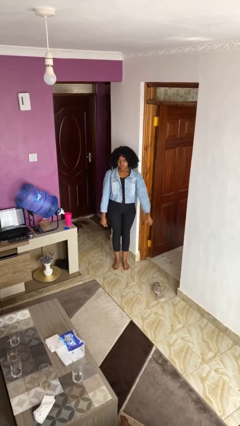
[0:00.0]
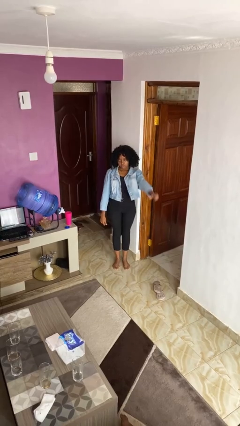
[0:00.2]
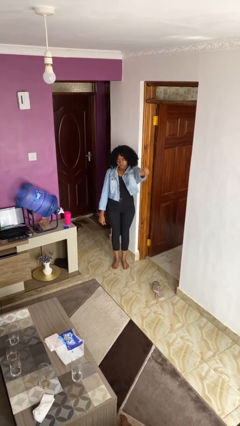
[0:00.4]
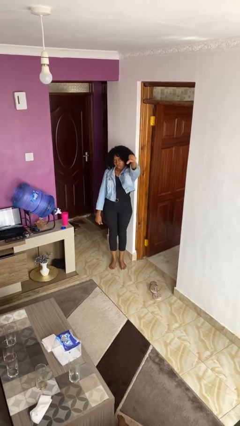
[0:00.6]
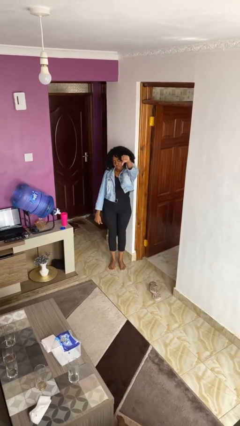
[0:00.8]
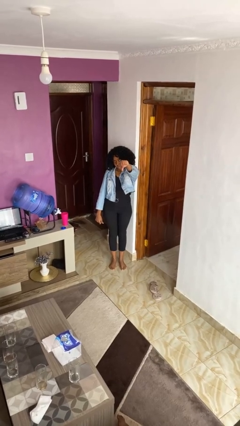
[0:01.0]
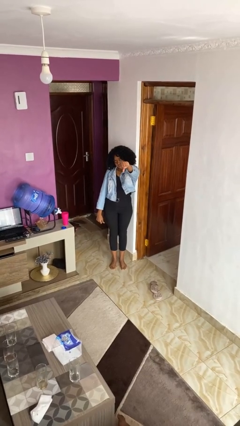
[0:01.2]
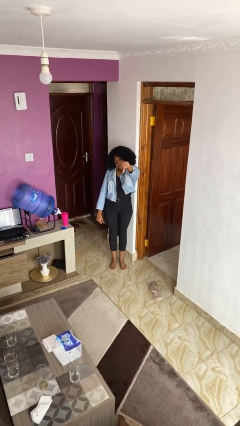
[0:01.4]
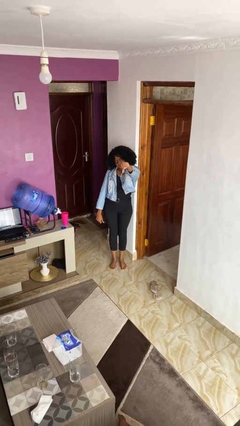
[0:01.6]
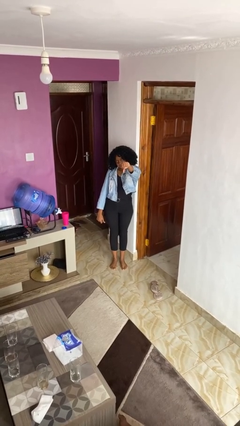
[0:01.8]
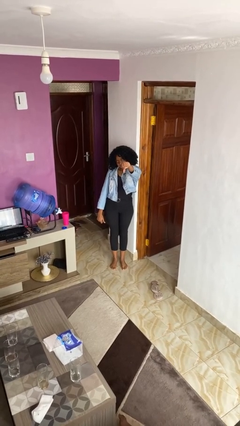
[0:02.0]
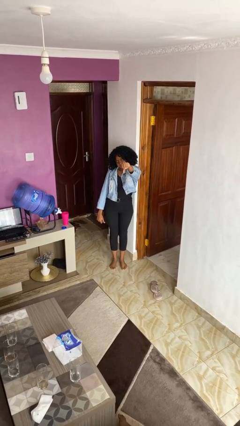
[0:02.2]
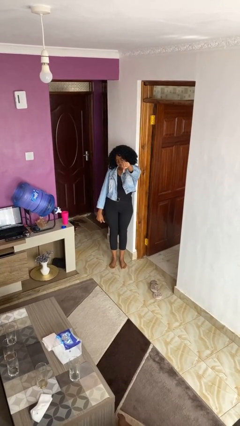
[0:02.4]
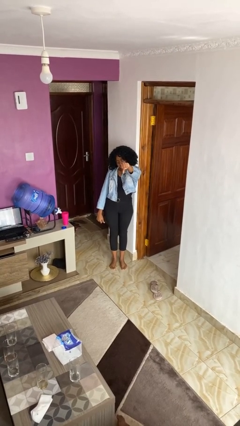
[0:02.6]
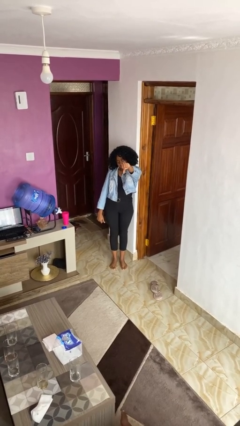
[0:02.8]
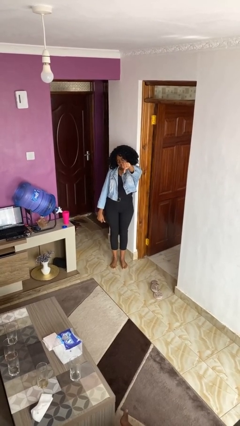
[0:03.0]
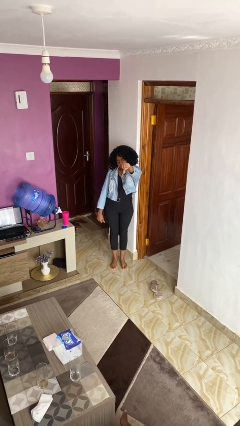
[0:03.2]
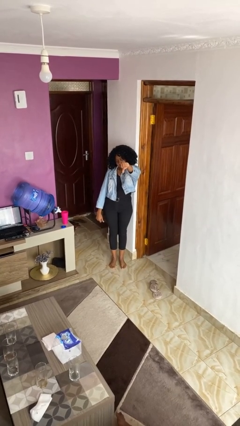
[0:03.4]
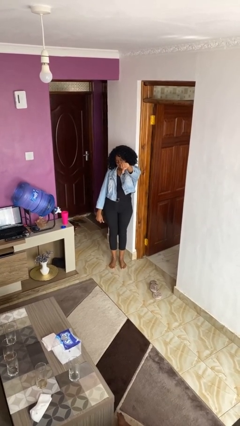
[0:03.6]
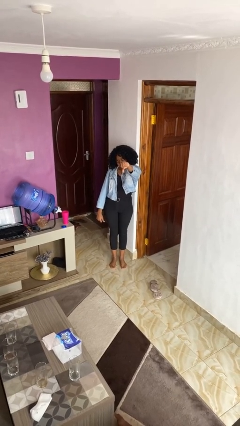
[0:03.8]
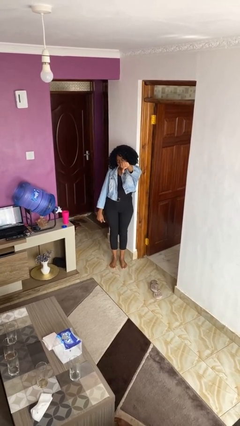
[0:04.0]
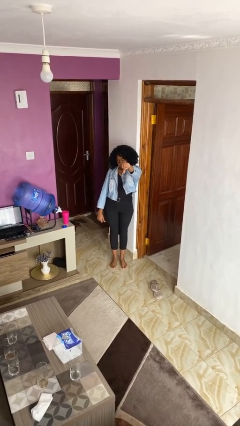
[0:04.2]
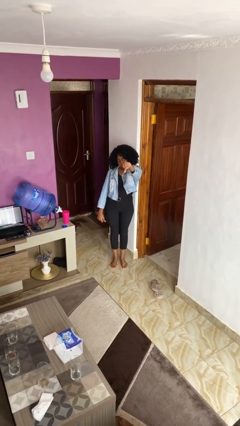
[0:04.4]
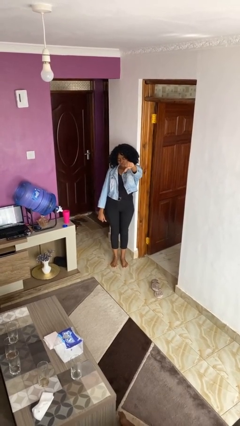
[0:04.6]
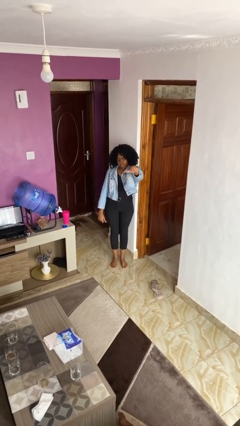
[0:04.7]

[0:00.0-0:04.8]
person gestures thumbs down

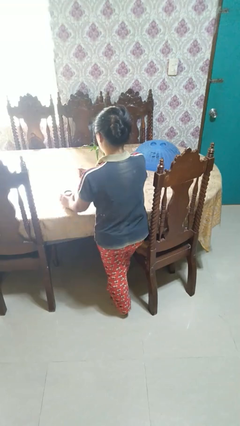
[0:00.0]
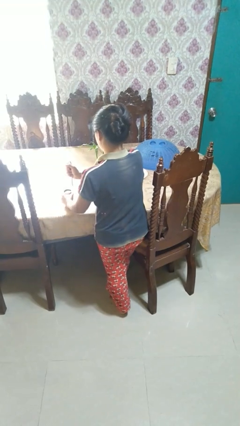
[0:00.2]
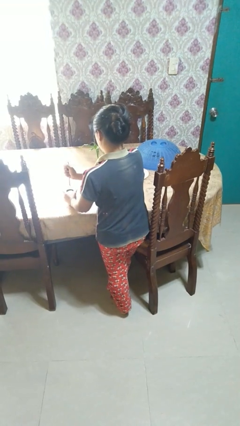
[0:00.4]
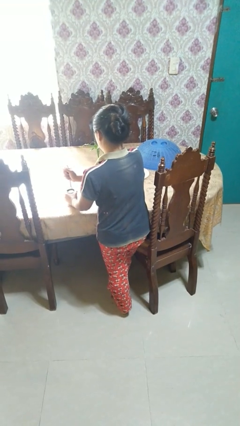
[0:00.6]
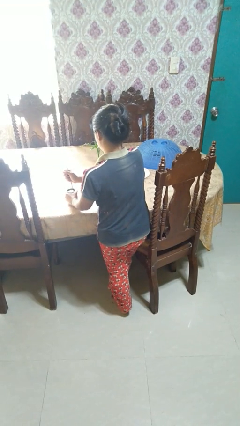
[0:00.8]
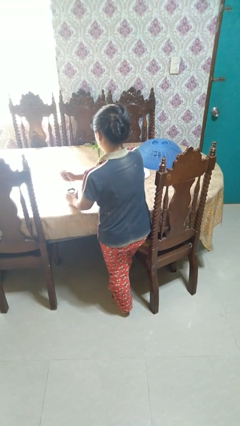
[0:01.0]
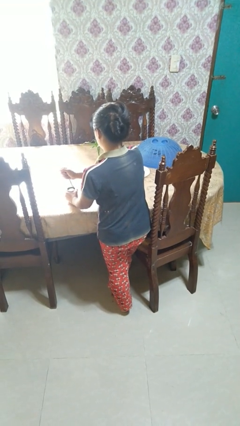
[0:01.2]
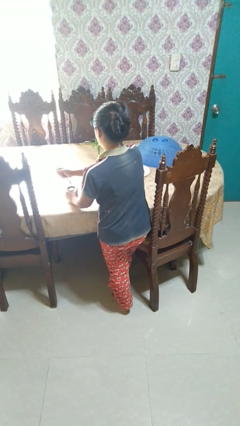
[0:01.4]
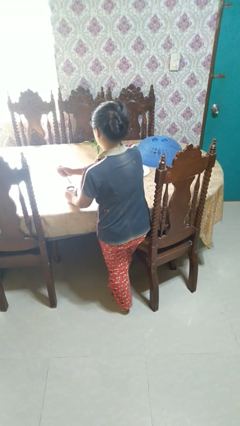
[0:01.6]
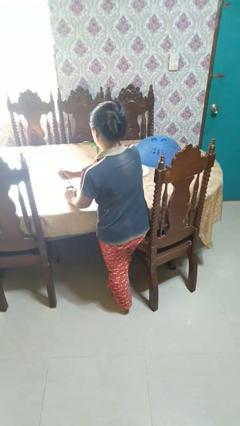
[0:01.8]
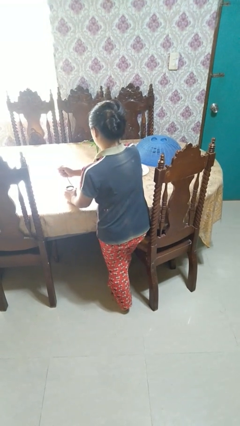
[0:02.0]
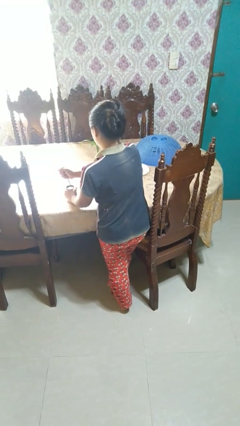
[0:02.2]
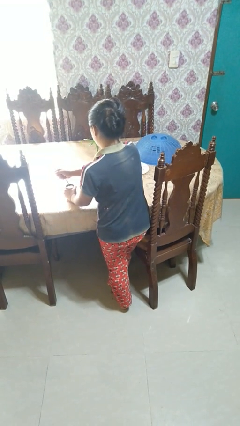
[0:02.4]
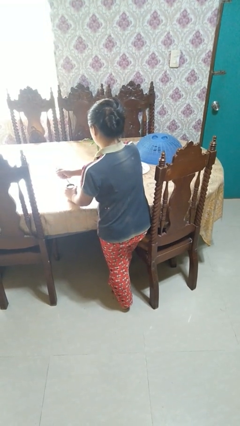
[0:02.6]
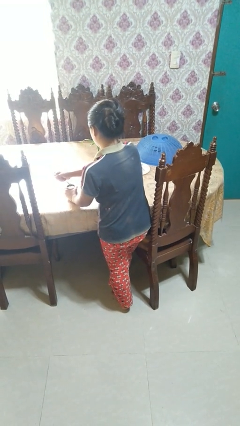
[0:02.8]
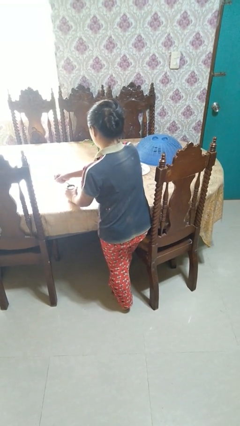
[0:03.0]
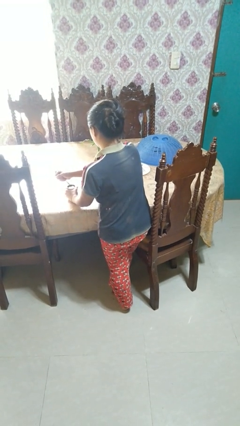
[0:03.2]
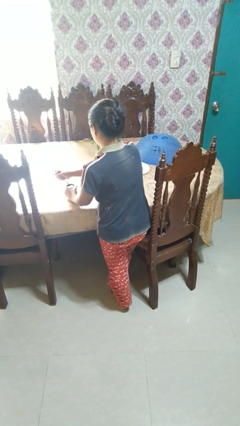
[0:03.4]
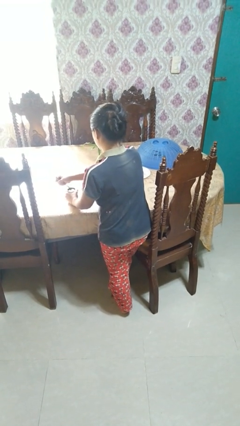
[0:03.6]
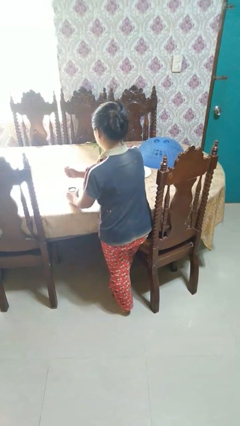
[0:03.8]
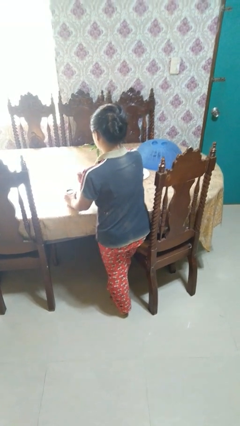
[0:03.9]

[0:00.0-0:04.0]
person opens can with can opener

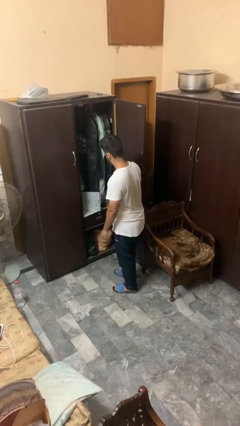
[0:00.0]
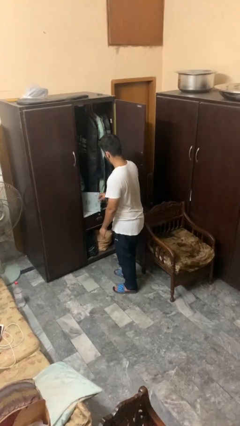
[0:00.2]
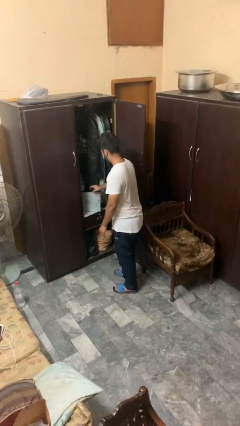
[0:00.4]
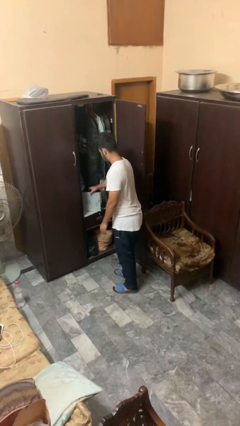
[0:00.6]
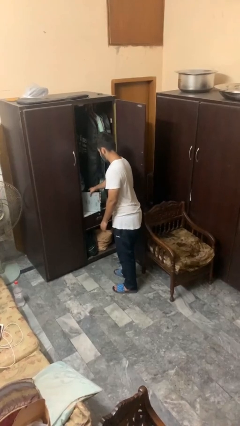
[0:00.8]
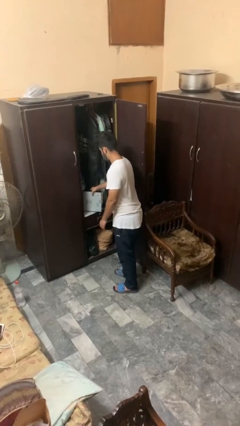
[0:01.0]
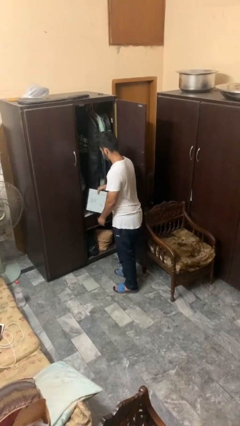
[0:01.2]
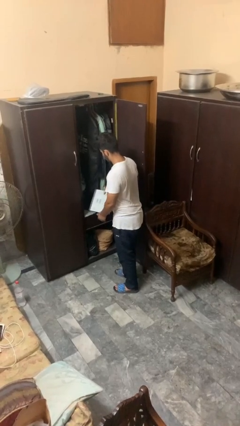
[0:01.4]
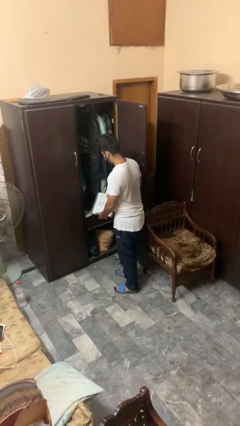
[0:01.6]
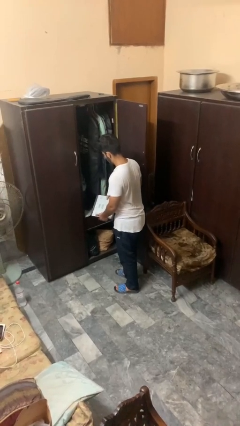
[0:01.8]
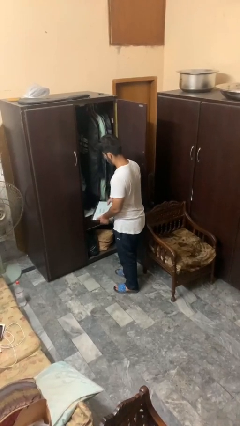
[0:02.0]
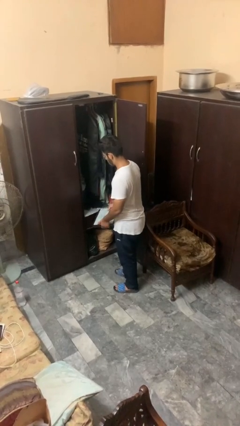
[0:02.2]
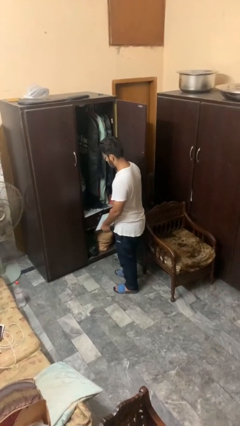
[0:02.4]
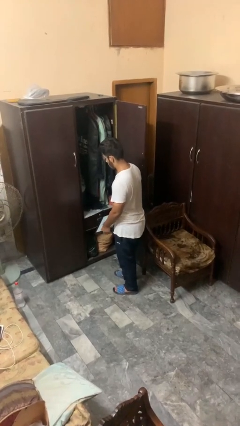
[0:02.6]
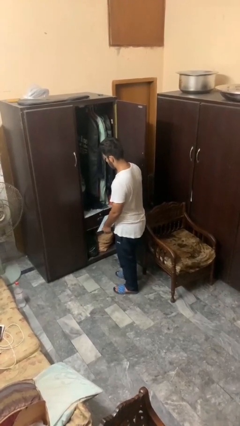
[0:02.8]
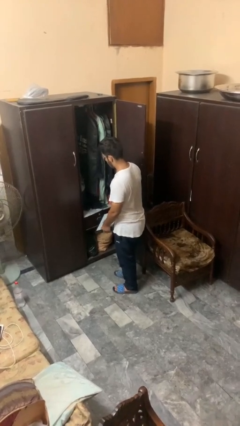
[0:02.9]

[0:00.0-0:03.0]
person picks up object from countertop

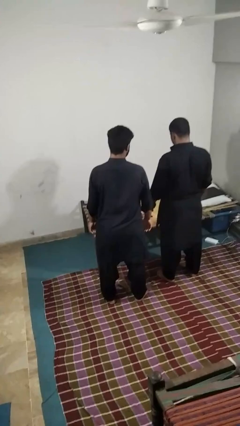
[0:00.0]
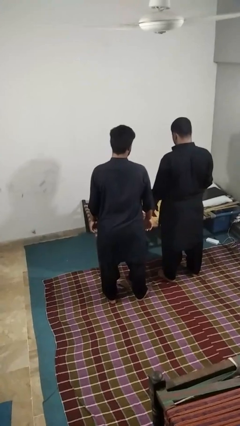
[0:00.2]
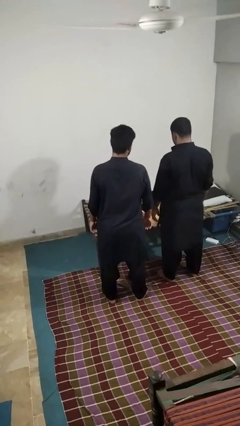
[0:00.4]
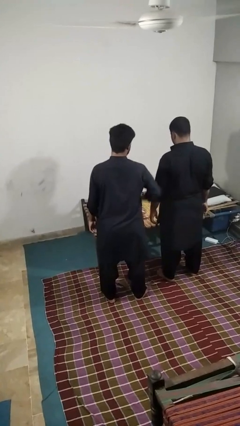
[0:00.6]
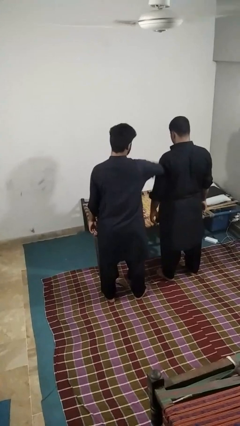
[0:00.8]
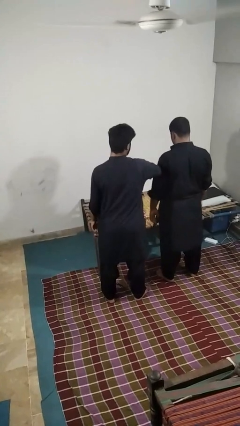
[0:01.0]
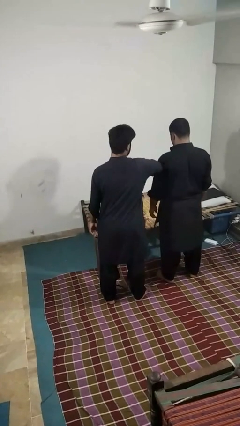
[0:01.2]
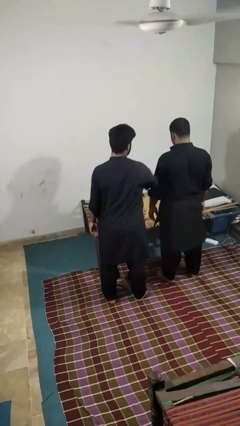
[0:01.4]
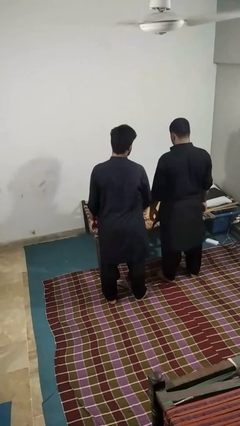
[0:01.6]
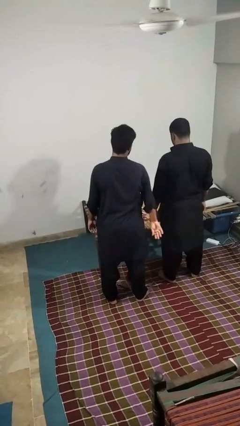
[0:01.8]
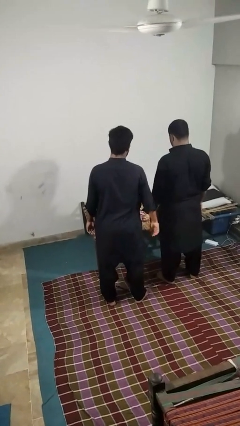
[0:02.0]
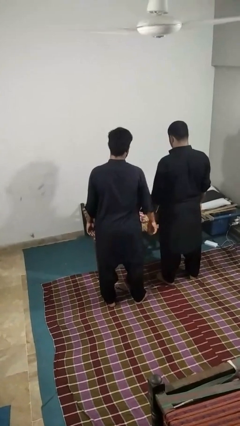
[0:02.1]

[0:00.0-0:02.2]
person nudges person with elbow

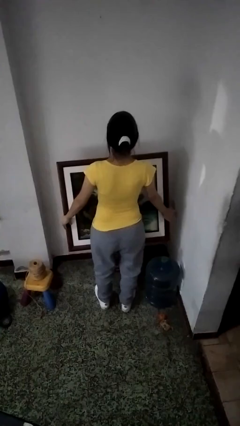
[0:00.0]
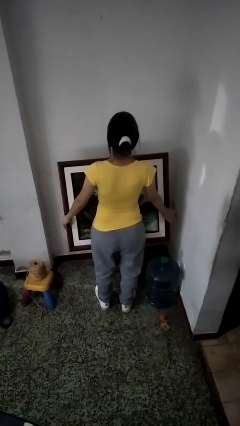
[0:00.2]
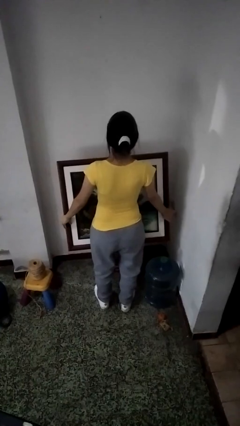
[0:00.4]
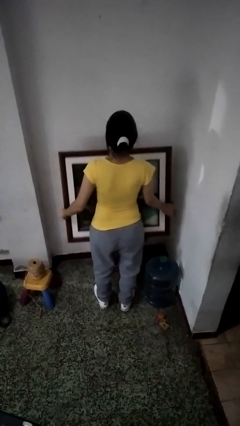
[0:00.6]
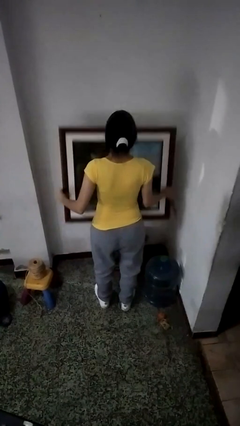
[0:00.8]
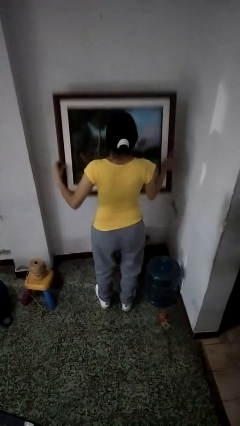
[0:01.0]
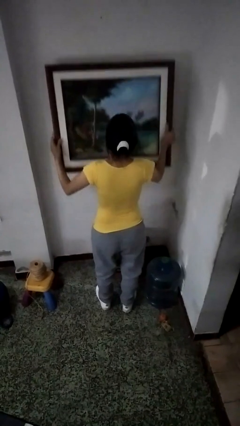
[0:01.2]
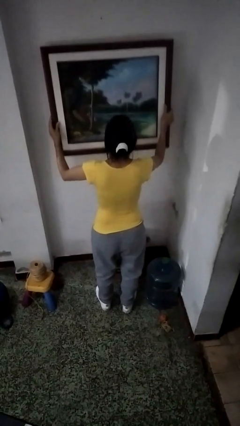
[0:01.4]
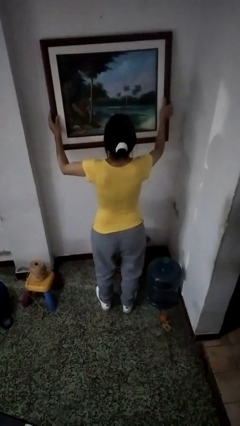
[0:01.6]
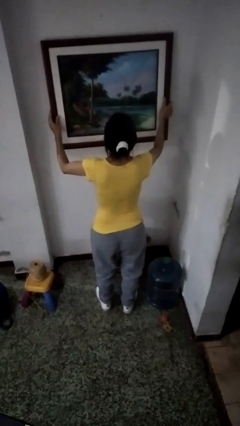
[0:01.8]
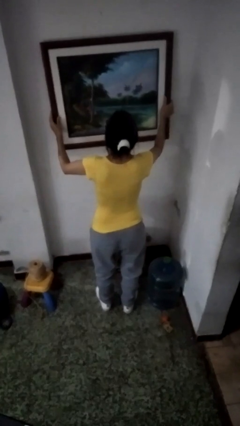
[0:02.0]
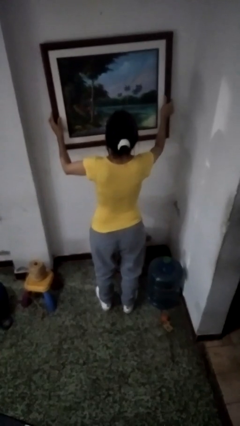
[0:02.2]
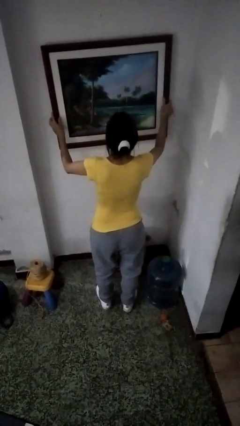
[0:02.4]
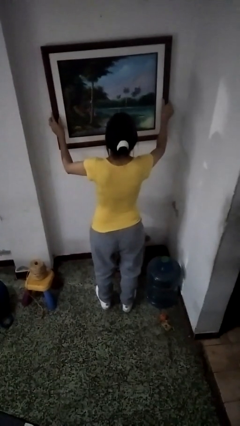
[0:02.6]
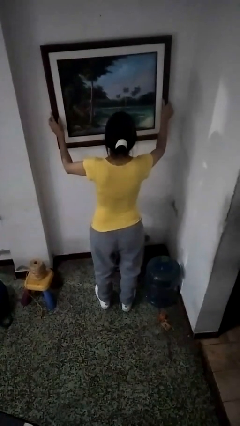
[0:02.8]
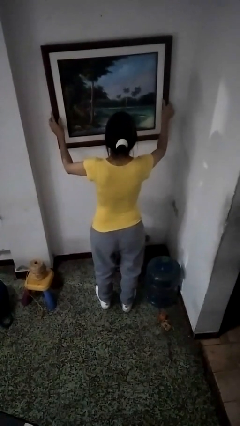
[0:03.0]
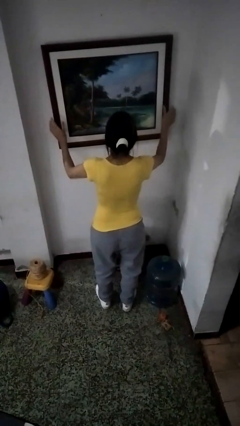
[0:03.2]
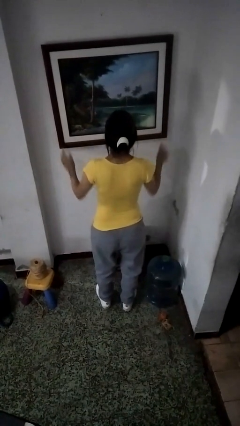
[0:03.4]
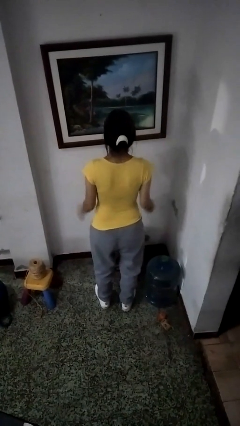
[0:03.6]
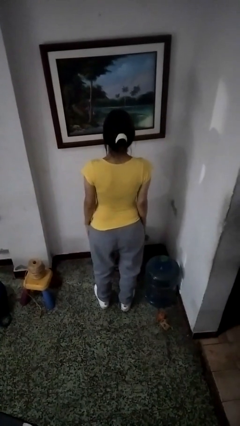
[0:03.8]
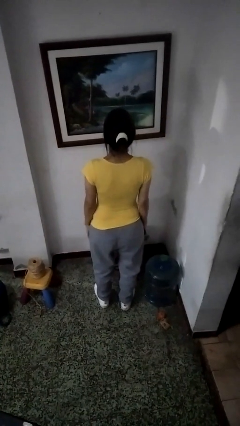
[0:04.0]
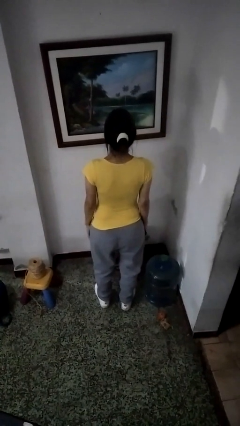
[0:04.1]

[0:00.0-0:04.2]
person puts up picture frame
